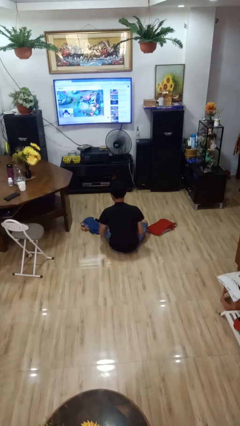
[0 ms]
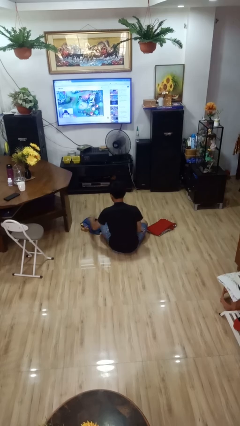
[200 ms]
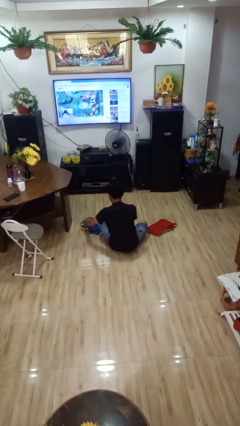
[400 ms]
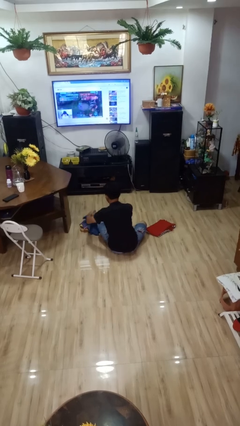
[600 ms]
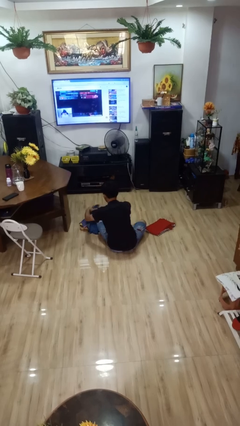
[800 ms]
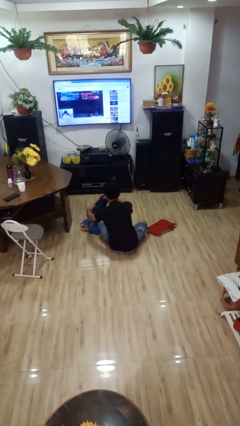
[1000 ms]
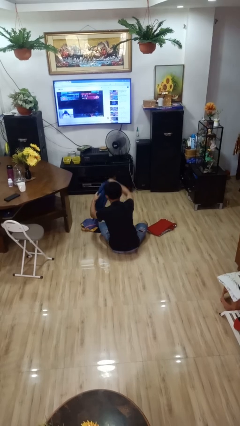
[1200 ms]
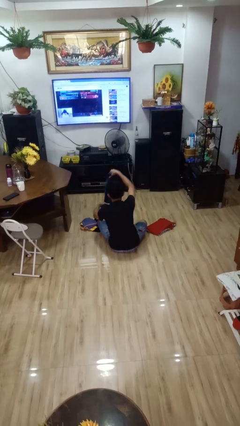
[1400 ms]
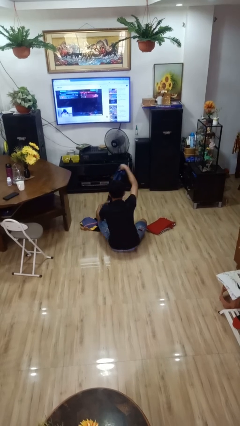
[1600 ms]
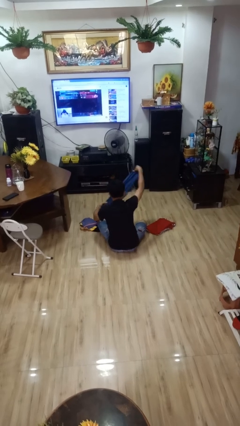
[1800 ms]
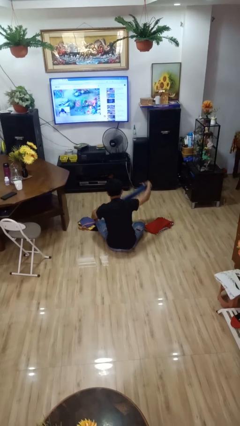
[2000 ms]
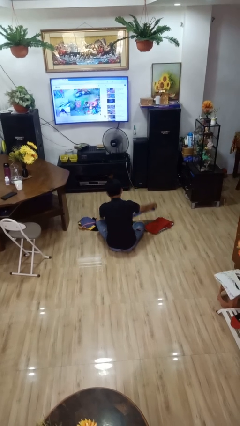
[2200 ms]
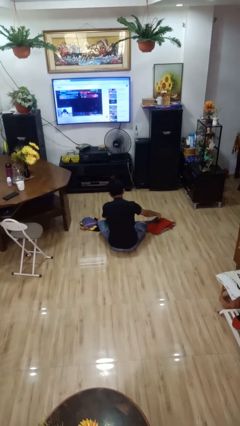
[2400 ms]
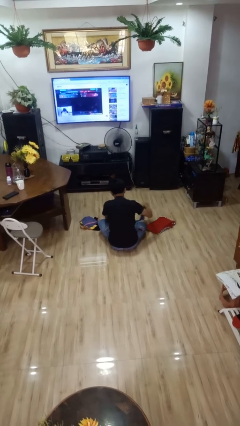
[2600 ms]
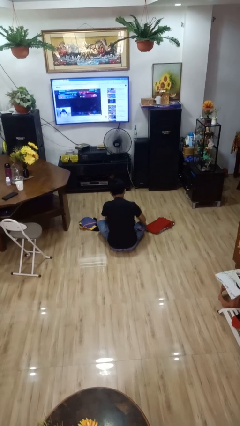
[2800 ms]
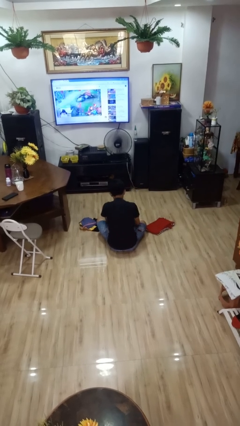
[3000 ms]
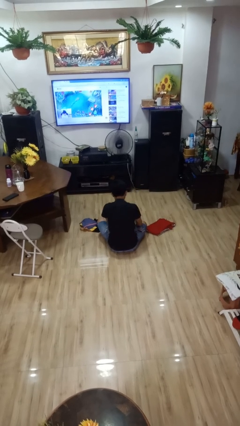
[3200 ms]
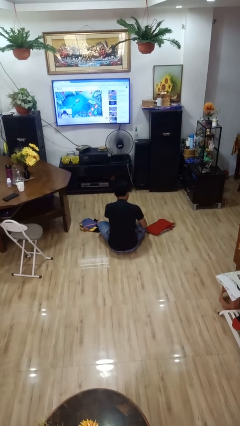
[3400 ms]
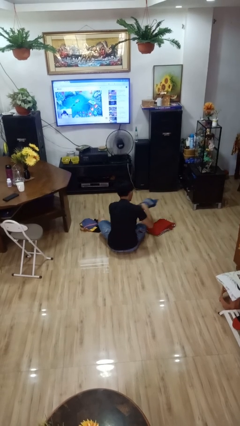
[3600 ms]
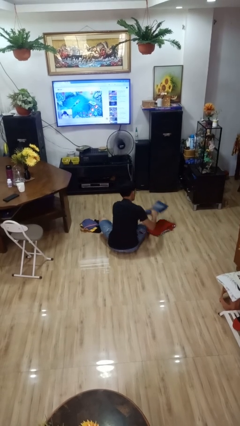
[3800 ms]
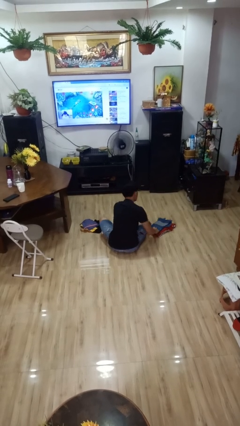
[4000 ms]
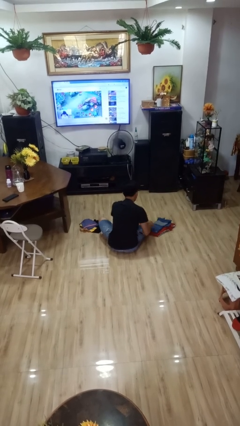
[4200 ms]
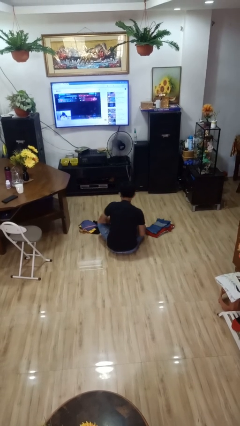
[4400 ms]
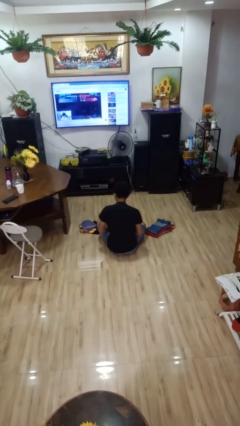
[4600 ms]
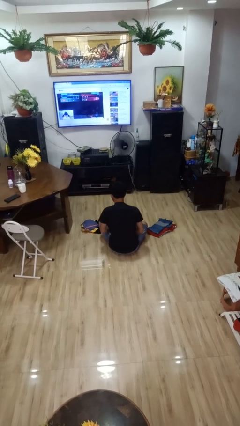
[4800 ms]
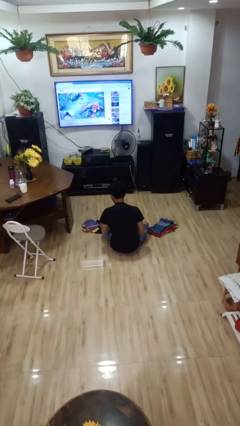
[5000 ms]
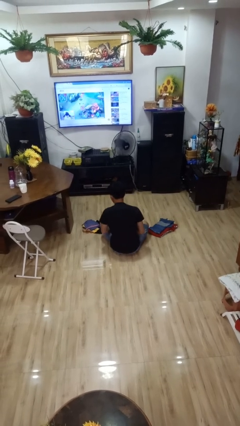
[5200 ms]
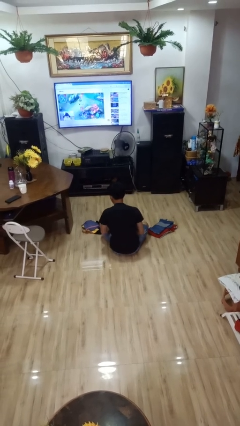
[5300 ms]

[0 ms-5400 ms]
person folds shirt

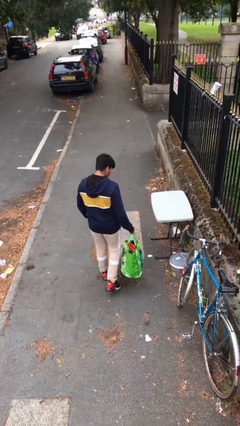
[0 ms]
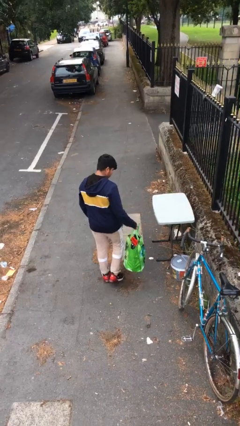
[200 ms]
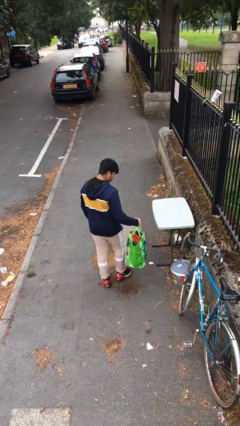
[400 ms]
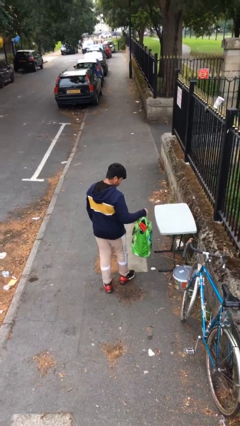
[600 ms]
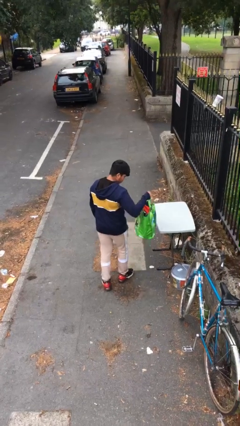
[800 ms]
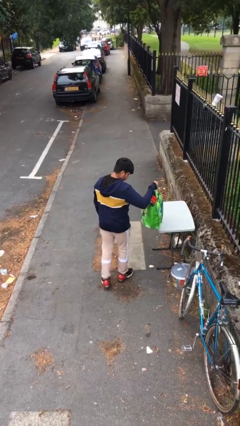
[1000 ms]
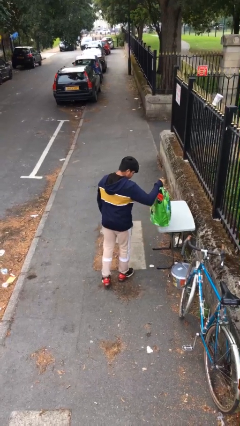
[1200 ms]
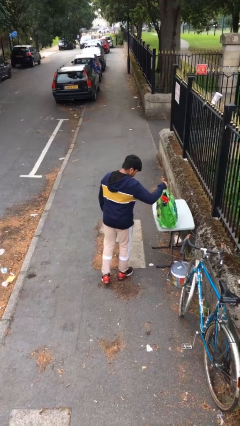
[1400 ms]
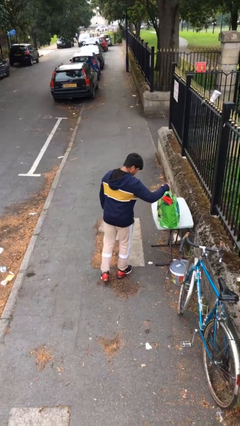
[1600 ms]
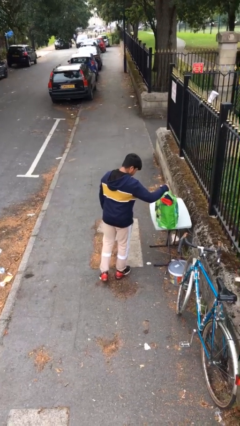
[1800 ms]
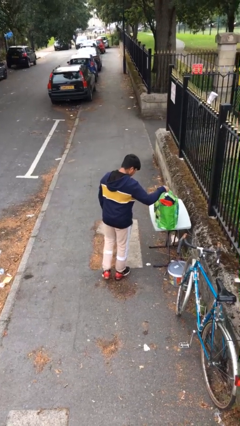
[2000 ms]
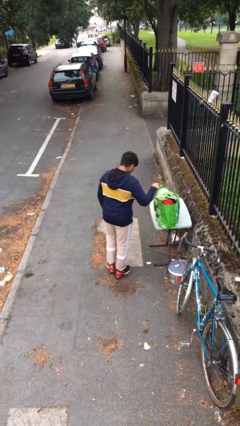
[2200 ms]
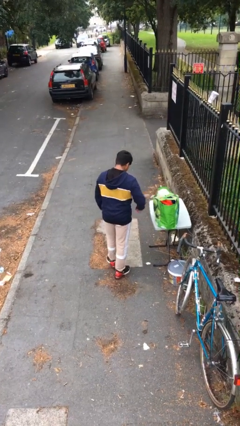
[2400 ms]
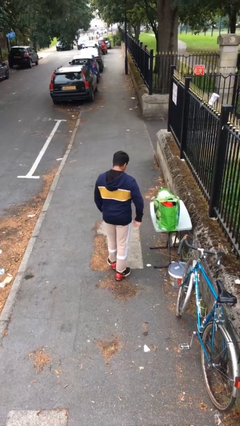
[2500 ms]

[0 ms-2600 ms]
person puts down object on table

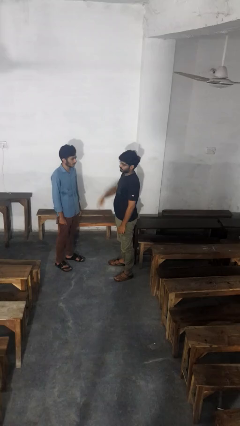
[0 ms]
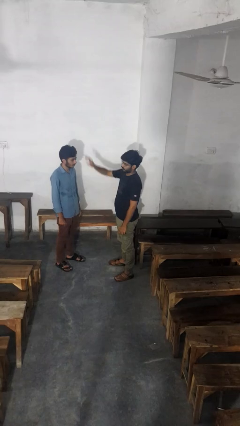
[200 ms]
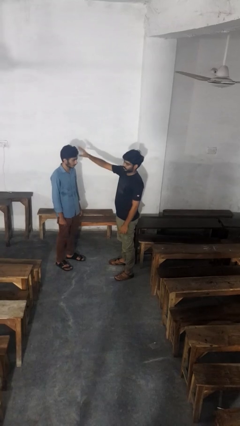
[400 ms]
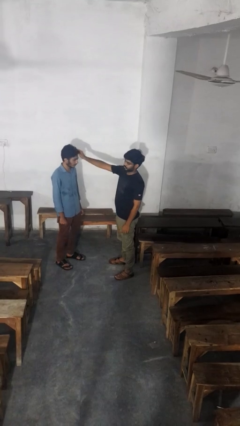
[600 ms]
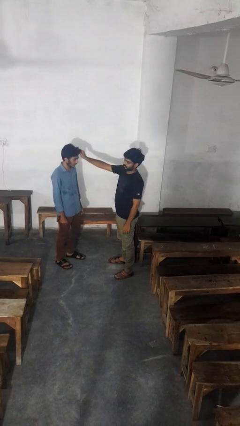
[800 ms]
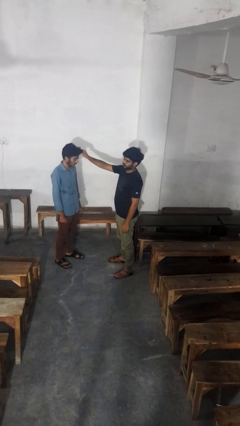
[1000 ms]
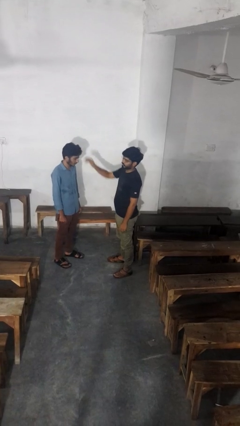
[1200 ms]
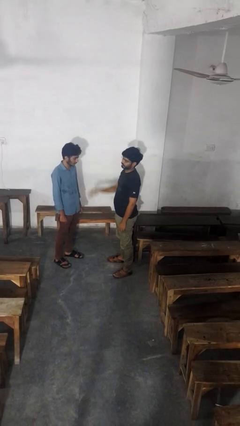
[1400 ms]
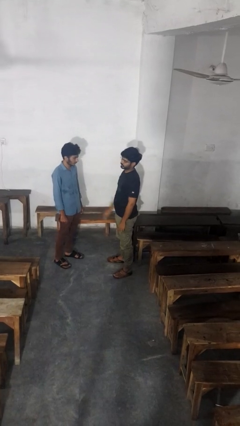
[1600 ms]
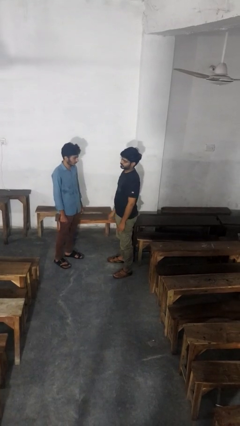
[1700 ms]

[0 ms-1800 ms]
person grabs person by hair

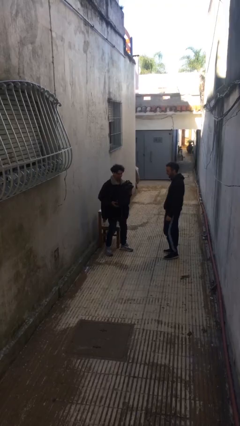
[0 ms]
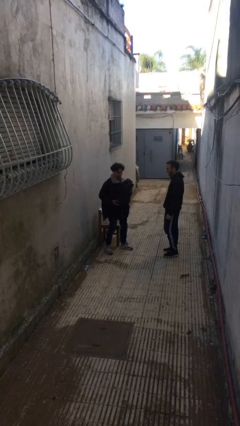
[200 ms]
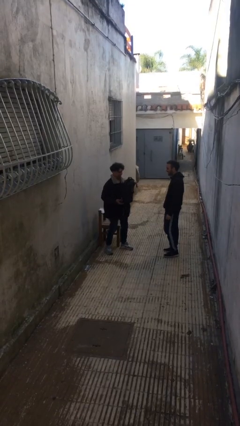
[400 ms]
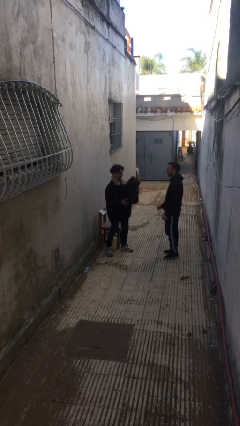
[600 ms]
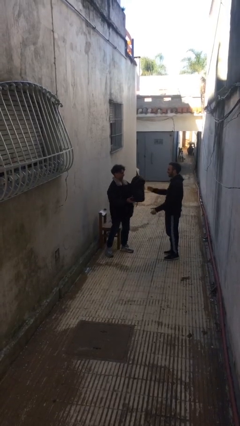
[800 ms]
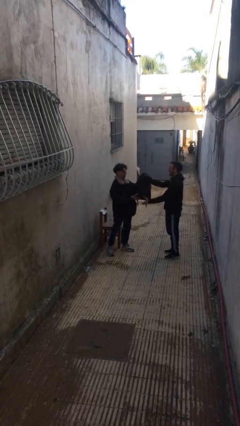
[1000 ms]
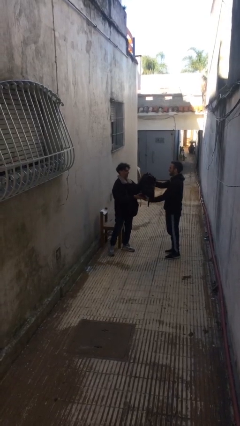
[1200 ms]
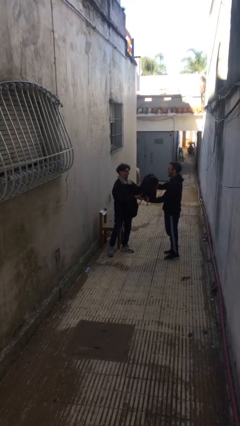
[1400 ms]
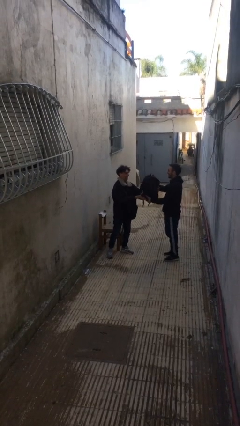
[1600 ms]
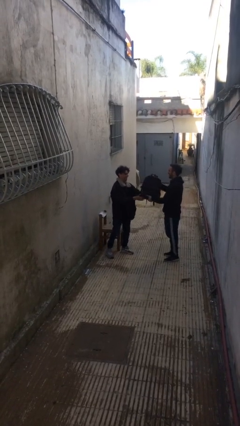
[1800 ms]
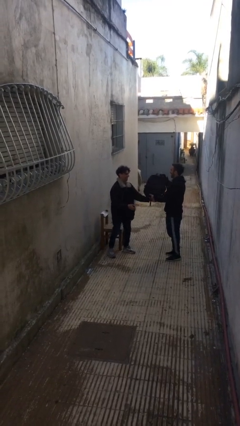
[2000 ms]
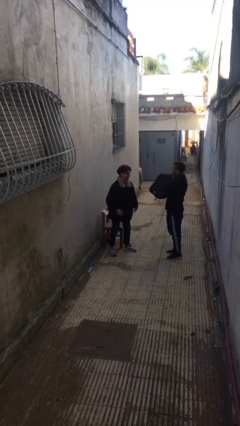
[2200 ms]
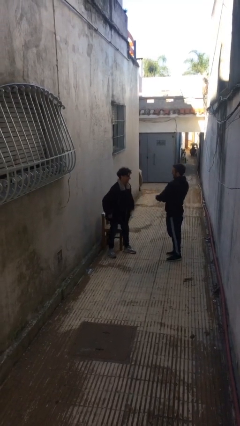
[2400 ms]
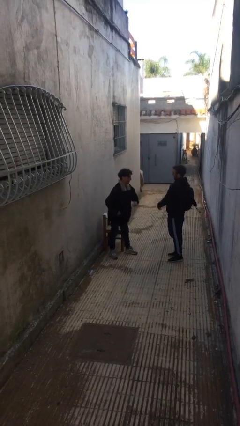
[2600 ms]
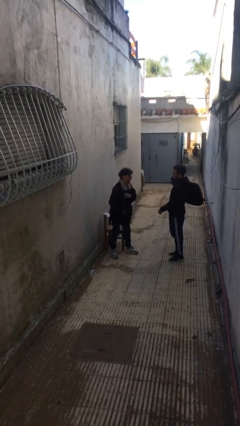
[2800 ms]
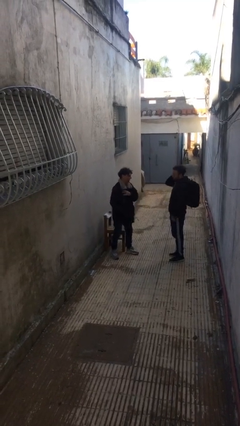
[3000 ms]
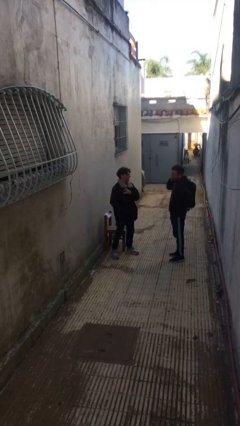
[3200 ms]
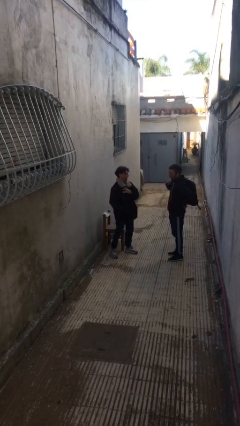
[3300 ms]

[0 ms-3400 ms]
person transfers object to person

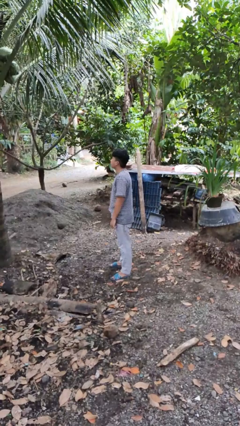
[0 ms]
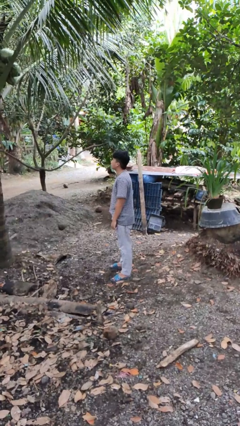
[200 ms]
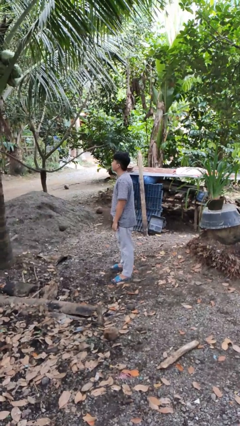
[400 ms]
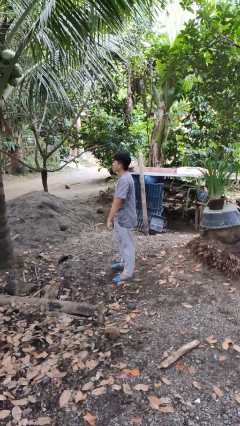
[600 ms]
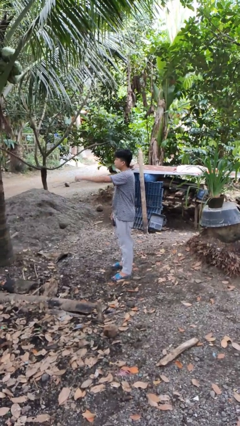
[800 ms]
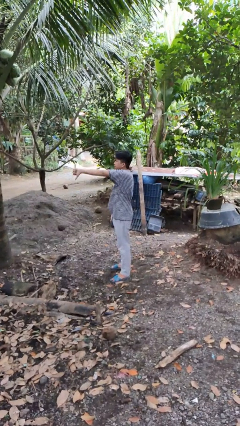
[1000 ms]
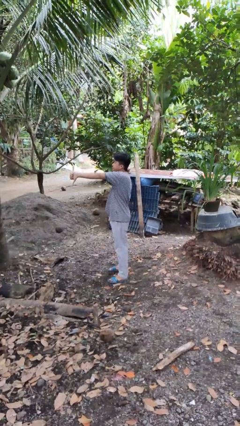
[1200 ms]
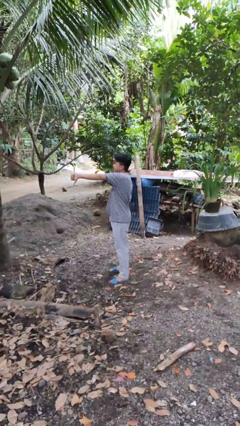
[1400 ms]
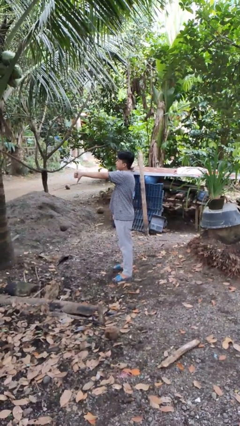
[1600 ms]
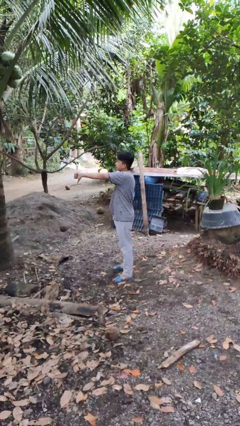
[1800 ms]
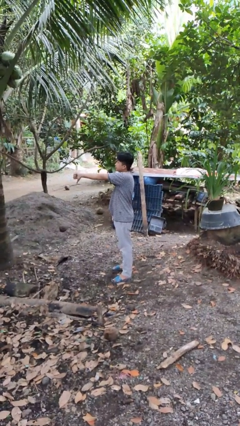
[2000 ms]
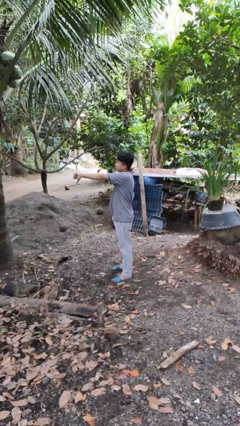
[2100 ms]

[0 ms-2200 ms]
person gestures thumbs down

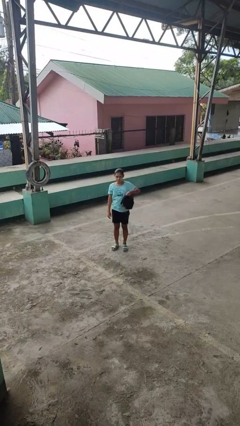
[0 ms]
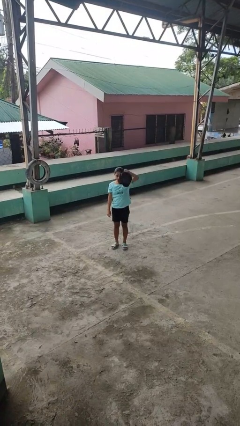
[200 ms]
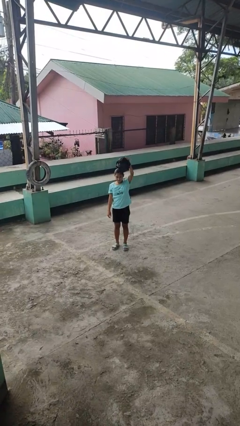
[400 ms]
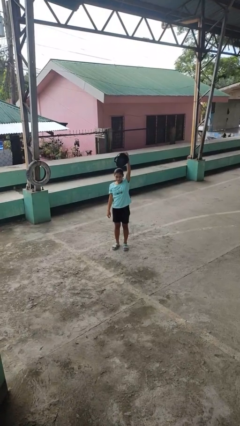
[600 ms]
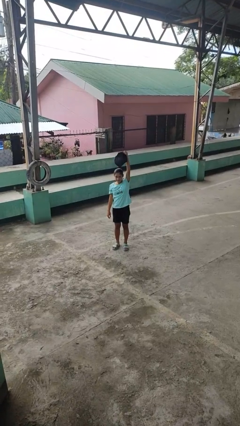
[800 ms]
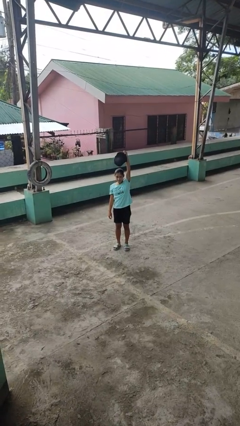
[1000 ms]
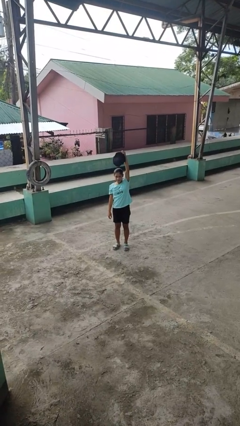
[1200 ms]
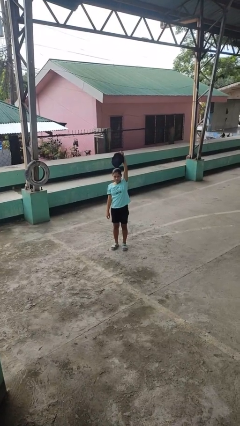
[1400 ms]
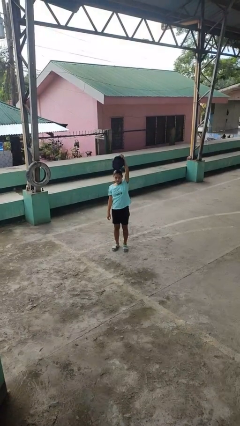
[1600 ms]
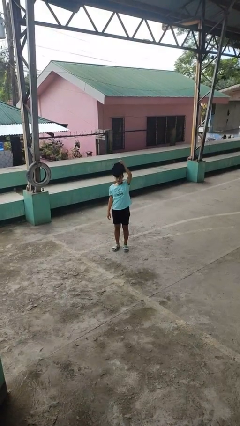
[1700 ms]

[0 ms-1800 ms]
person holds object above head
